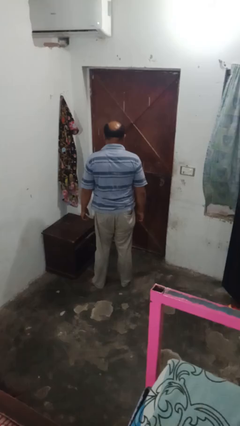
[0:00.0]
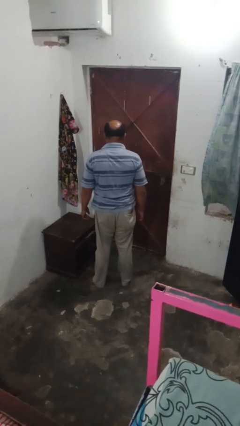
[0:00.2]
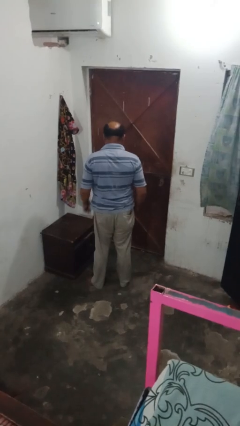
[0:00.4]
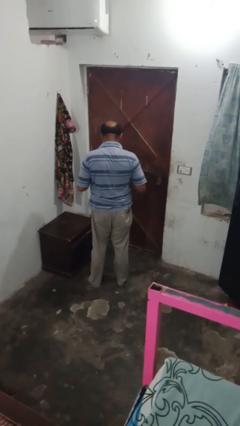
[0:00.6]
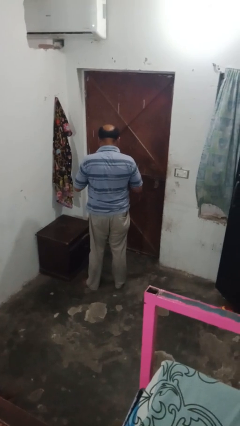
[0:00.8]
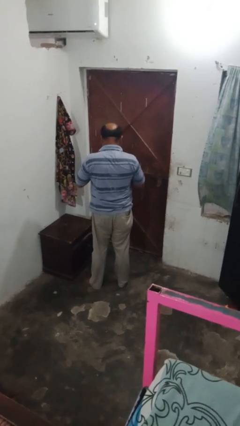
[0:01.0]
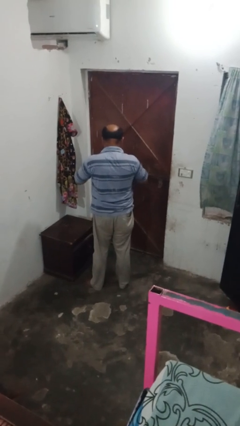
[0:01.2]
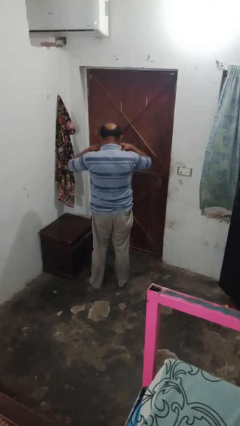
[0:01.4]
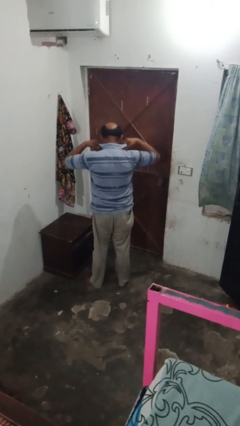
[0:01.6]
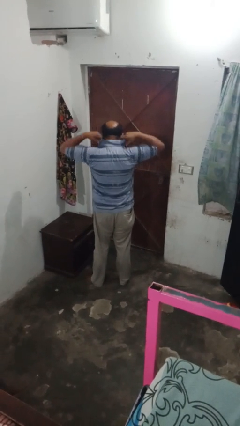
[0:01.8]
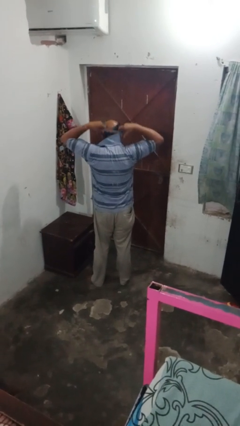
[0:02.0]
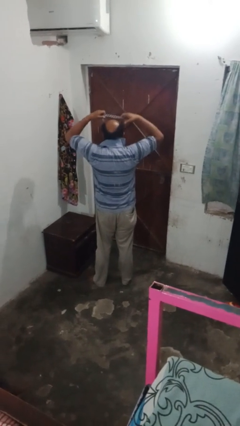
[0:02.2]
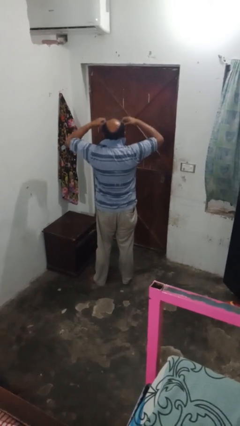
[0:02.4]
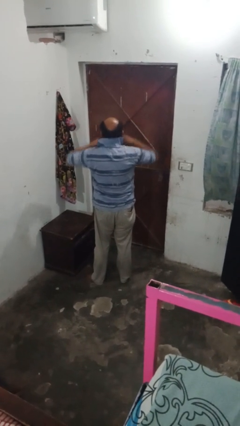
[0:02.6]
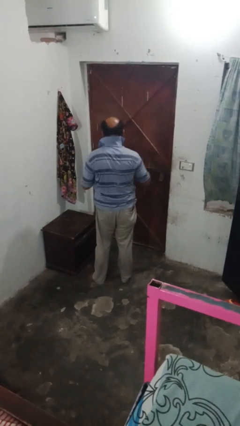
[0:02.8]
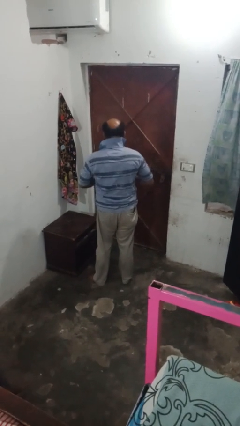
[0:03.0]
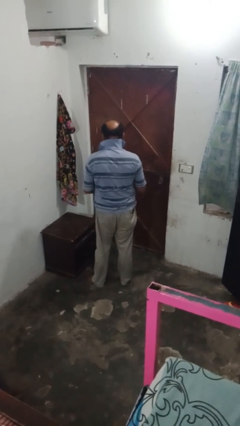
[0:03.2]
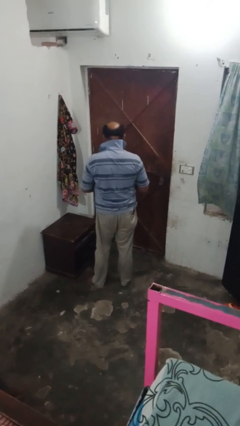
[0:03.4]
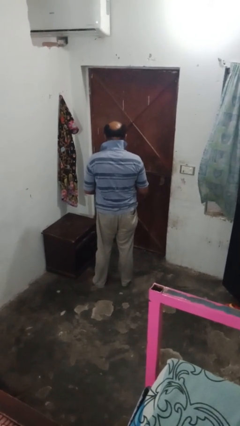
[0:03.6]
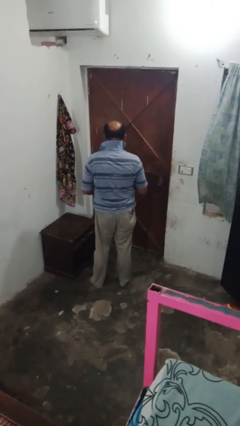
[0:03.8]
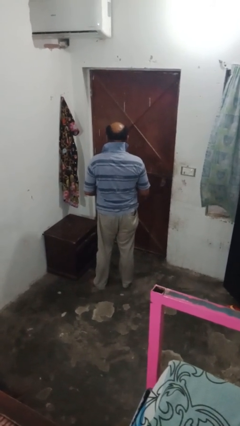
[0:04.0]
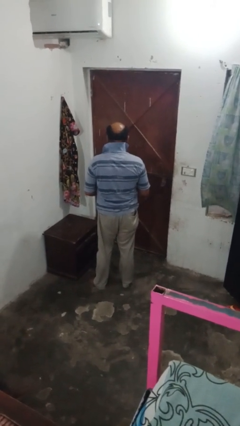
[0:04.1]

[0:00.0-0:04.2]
person takes off necktie

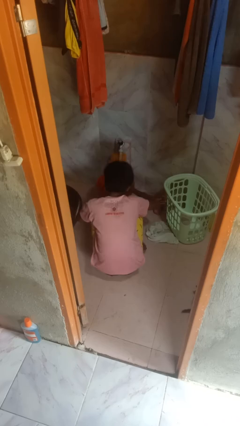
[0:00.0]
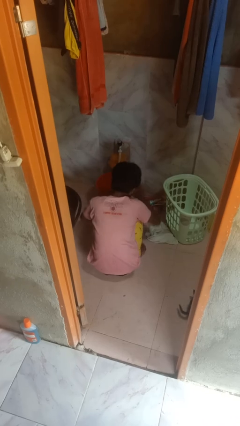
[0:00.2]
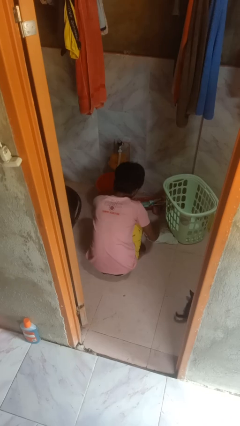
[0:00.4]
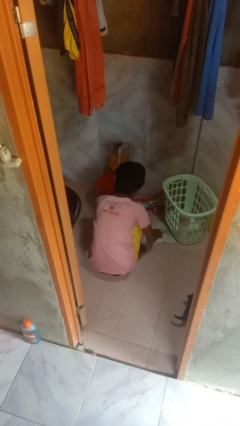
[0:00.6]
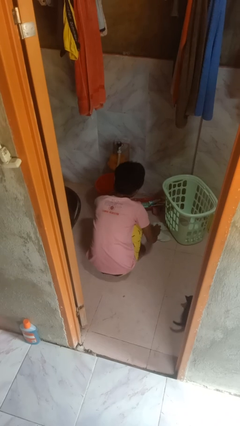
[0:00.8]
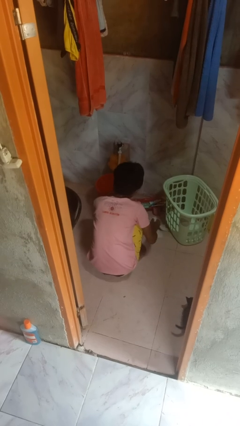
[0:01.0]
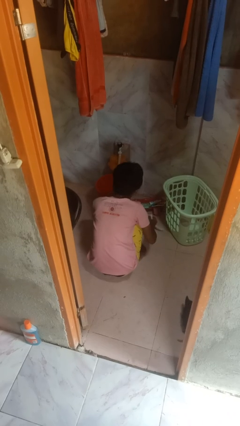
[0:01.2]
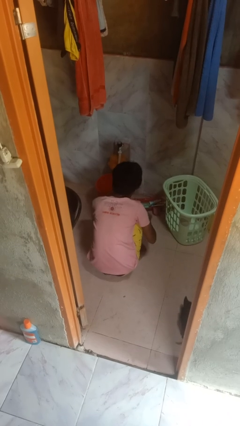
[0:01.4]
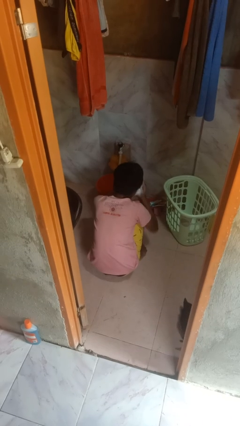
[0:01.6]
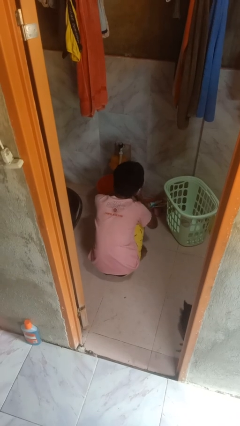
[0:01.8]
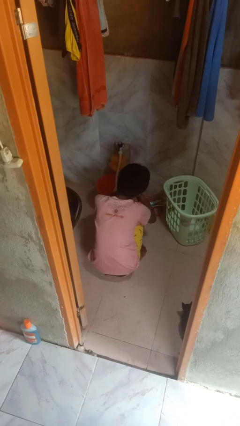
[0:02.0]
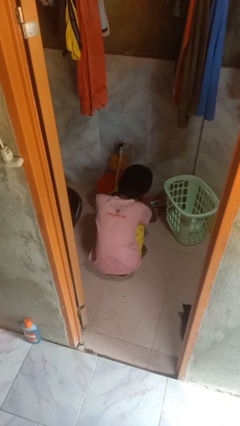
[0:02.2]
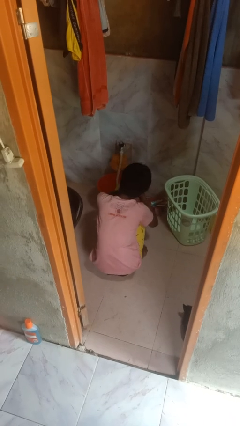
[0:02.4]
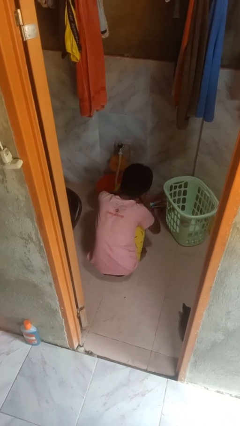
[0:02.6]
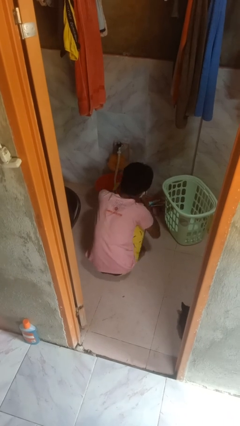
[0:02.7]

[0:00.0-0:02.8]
person dries face with towel

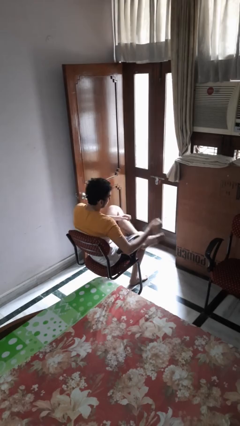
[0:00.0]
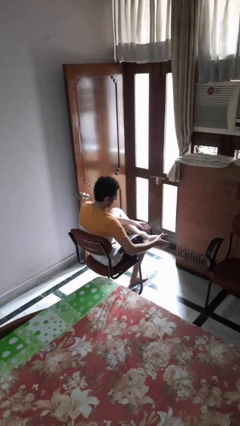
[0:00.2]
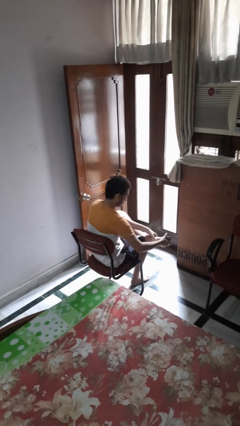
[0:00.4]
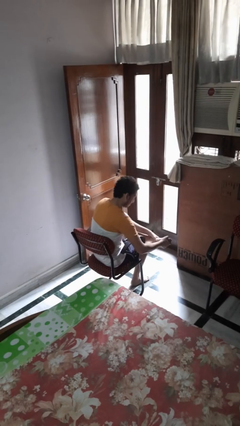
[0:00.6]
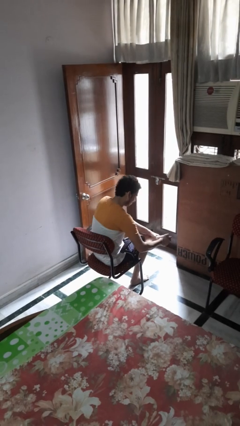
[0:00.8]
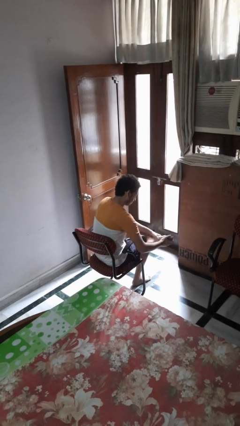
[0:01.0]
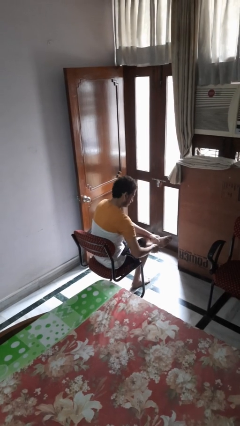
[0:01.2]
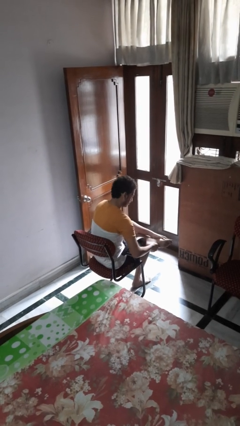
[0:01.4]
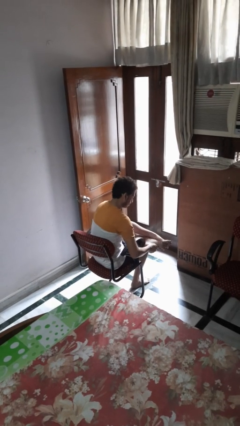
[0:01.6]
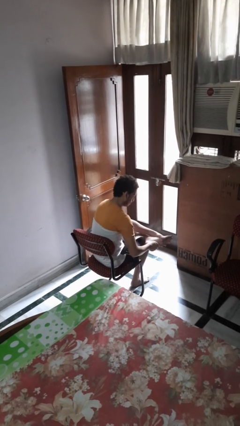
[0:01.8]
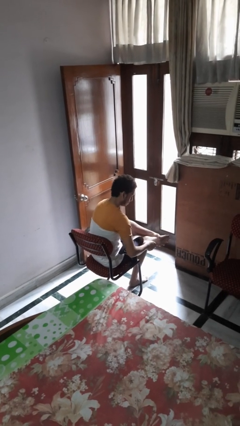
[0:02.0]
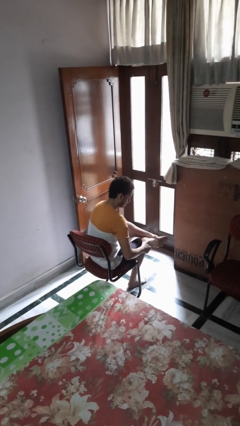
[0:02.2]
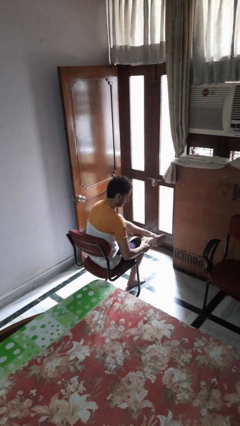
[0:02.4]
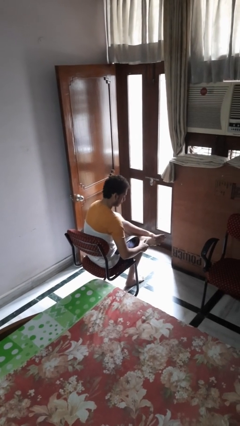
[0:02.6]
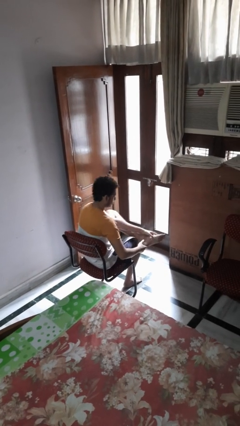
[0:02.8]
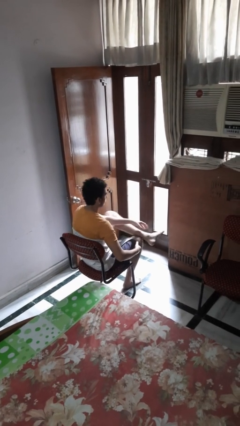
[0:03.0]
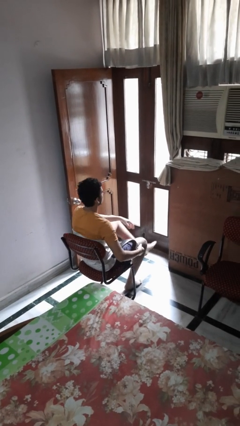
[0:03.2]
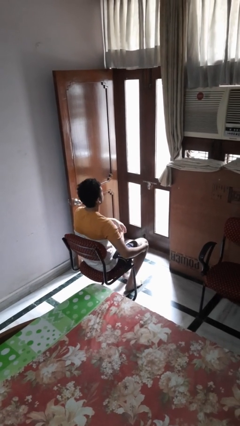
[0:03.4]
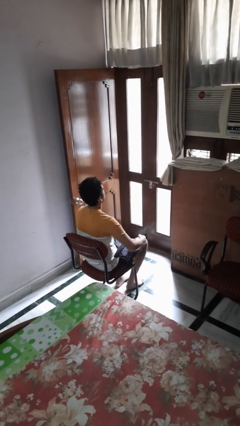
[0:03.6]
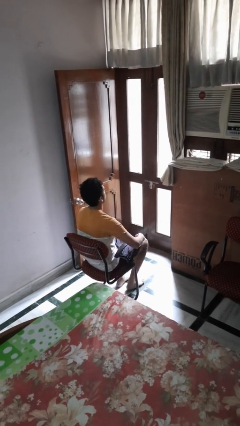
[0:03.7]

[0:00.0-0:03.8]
person rubs foot

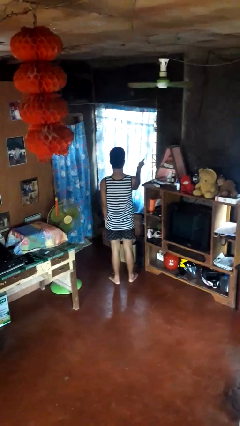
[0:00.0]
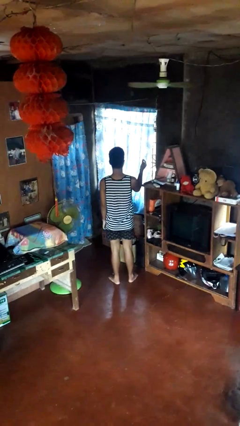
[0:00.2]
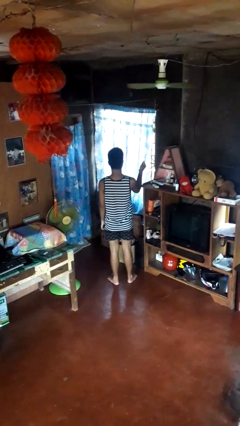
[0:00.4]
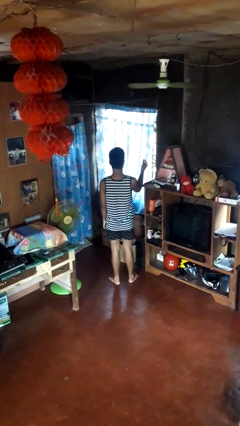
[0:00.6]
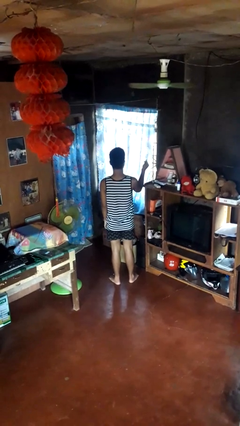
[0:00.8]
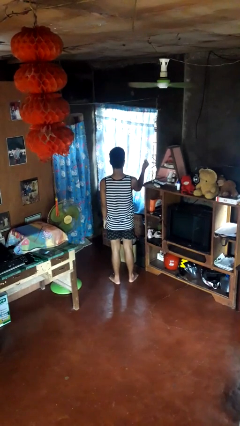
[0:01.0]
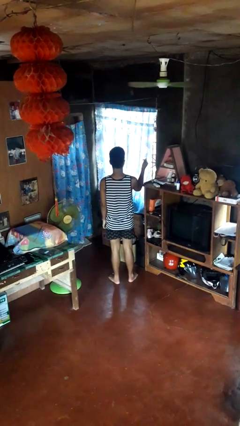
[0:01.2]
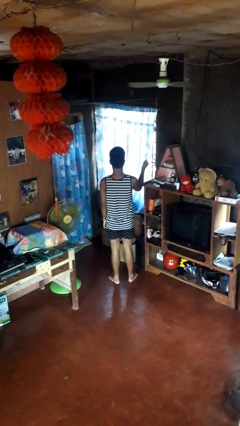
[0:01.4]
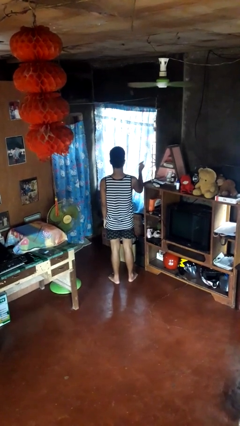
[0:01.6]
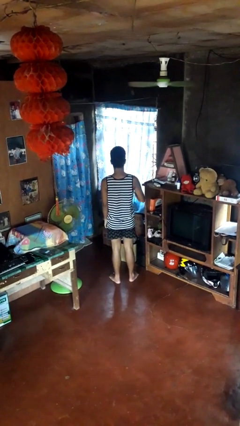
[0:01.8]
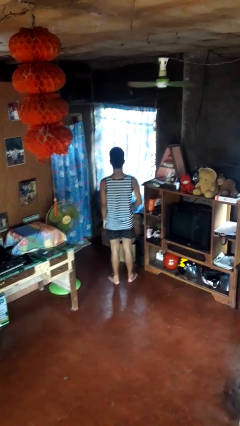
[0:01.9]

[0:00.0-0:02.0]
person snaps fingers

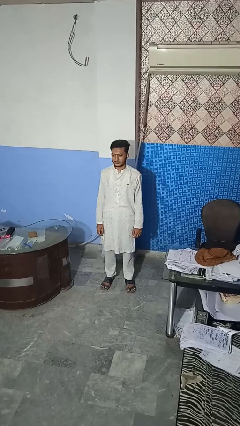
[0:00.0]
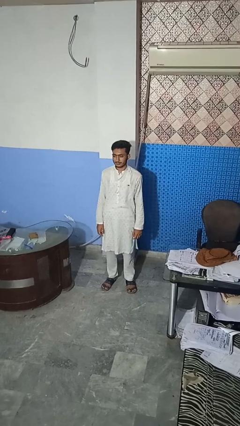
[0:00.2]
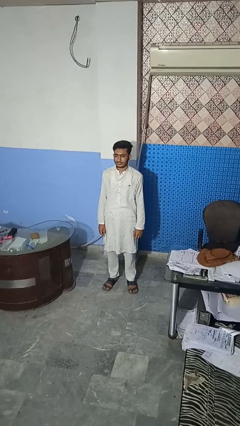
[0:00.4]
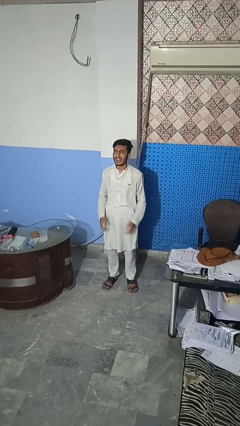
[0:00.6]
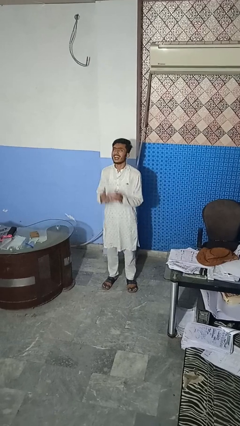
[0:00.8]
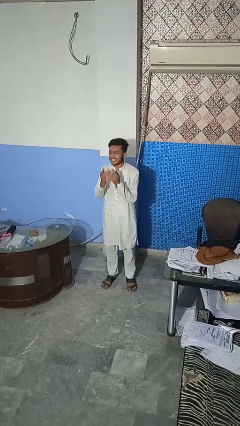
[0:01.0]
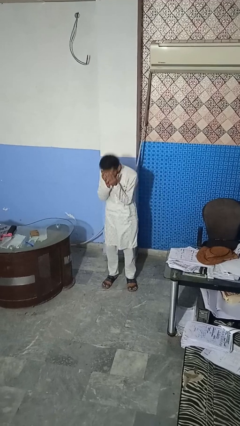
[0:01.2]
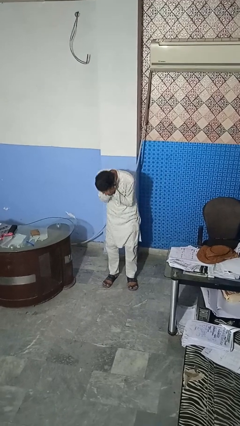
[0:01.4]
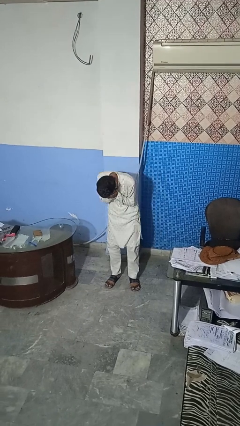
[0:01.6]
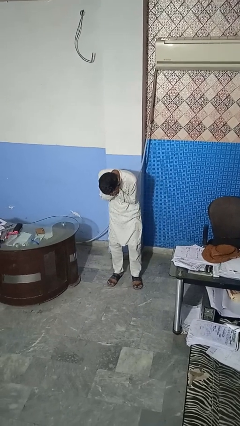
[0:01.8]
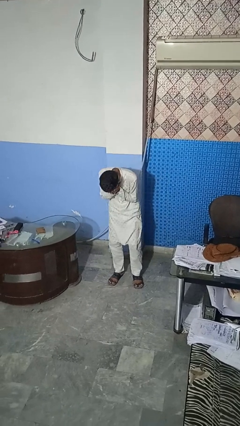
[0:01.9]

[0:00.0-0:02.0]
person sneezes into hand

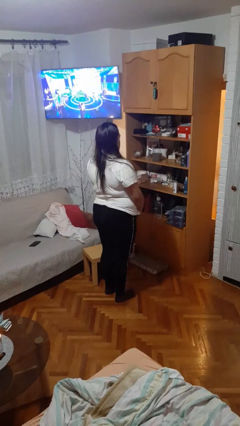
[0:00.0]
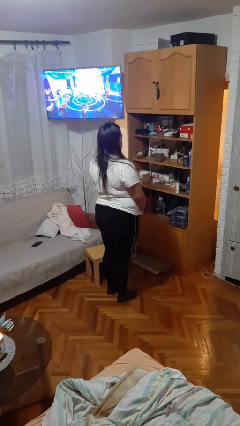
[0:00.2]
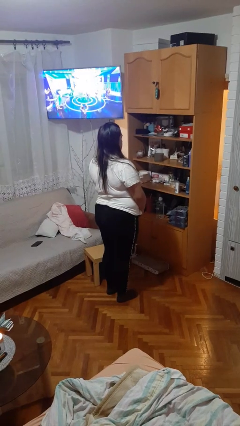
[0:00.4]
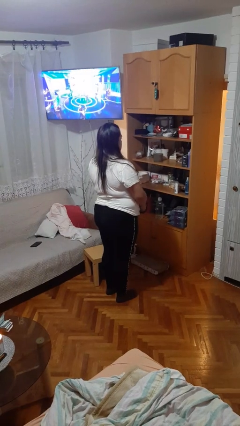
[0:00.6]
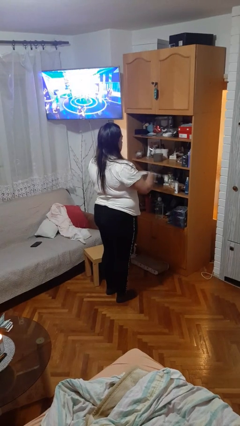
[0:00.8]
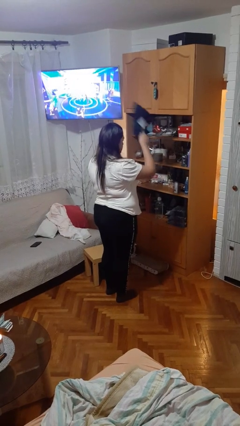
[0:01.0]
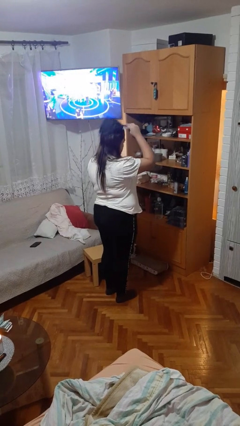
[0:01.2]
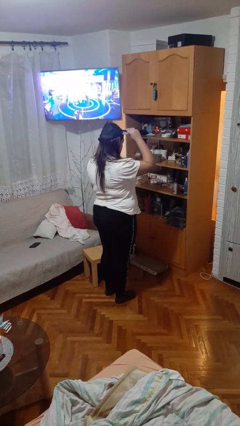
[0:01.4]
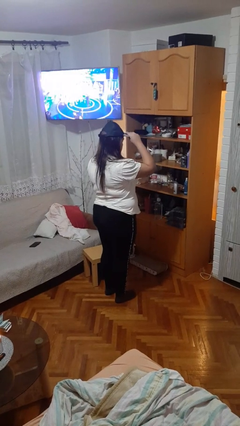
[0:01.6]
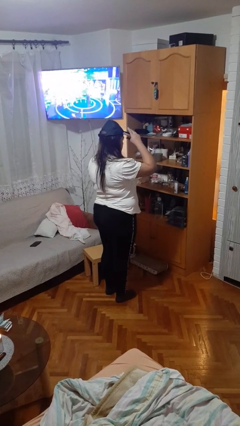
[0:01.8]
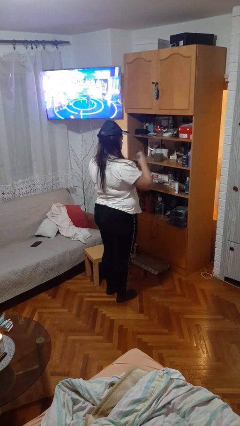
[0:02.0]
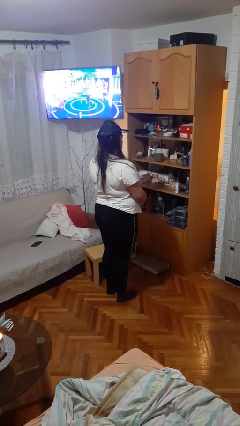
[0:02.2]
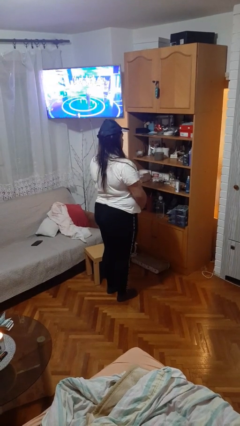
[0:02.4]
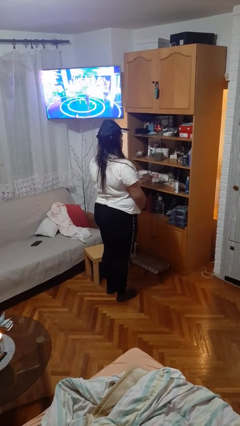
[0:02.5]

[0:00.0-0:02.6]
person puts on hat
